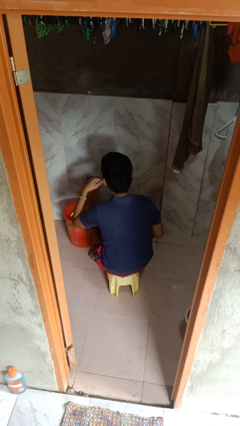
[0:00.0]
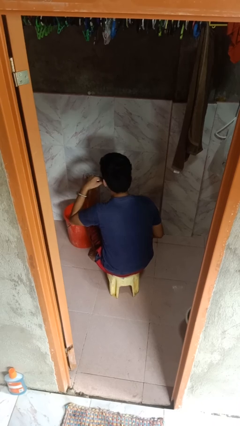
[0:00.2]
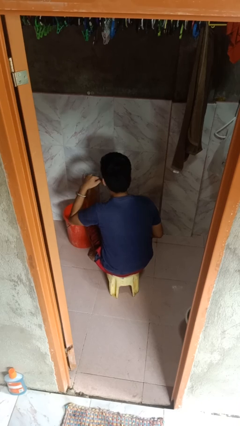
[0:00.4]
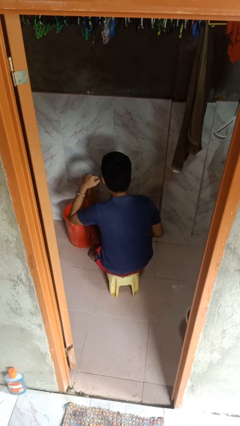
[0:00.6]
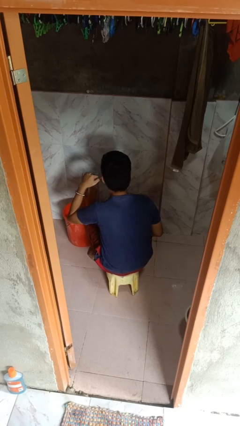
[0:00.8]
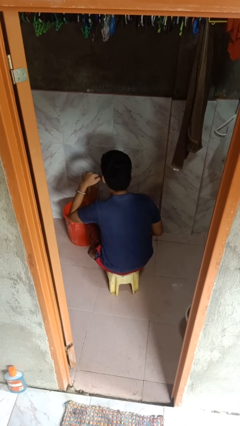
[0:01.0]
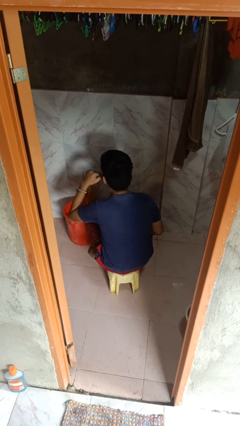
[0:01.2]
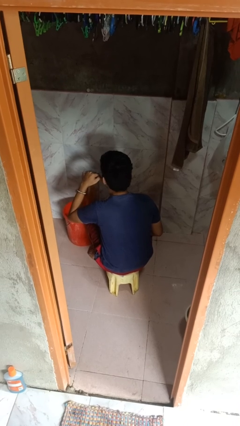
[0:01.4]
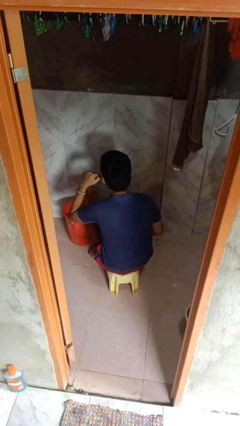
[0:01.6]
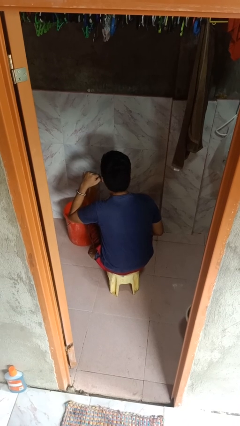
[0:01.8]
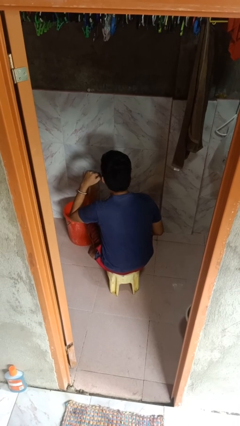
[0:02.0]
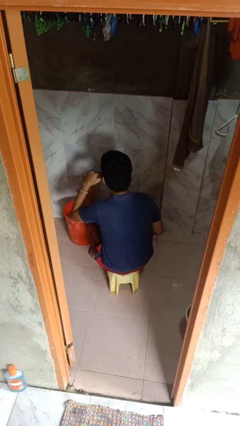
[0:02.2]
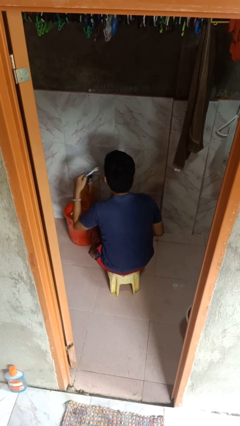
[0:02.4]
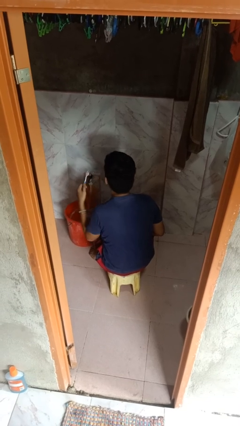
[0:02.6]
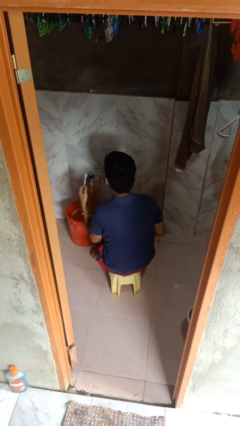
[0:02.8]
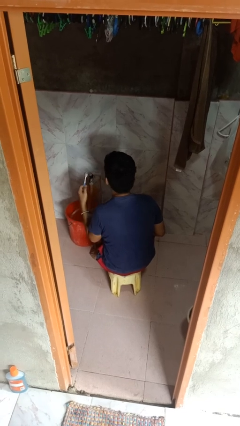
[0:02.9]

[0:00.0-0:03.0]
person brushes teeth

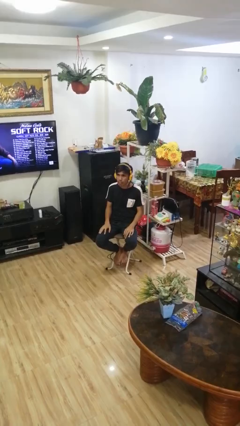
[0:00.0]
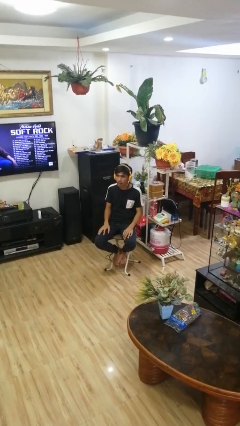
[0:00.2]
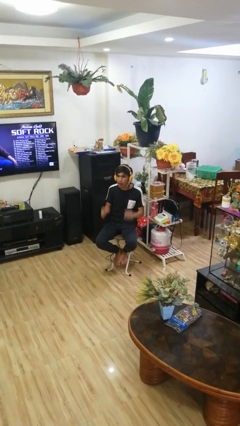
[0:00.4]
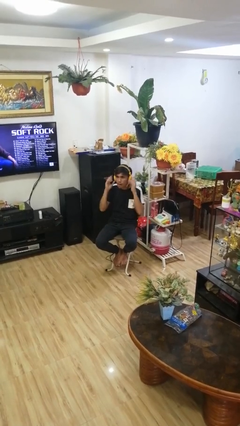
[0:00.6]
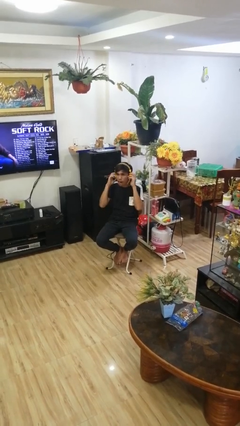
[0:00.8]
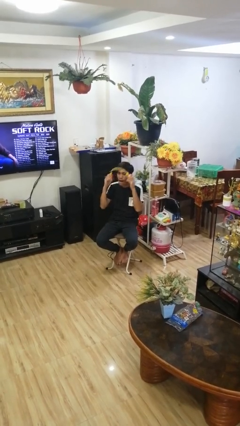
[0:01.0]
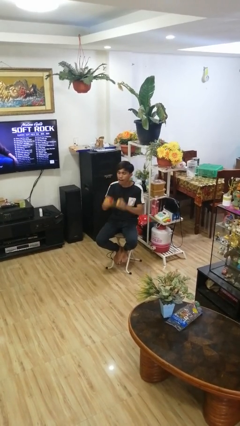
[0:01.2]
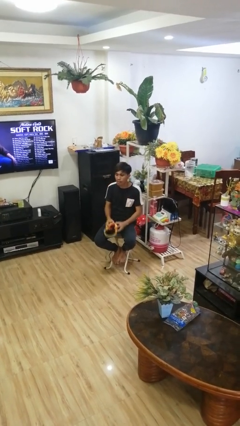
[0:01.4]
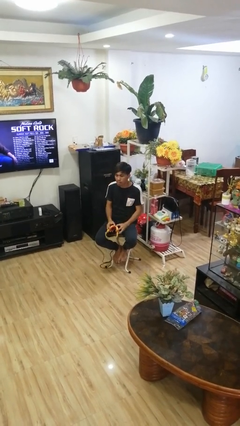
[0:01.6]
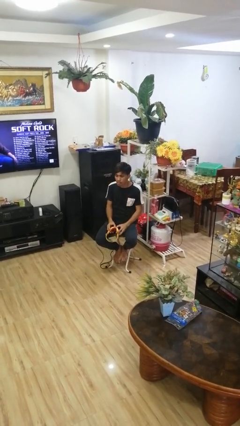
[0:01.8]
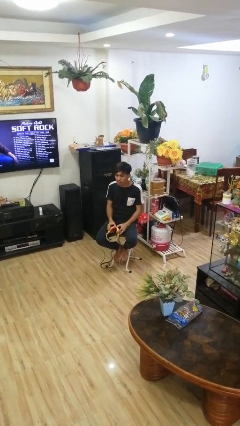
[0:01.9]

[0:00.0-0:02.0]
person takes off headphones

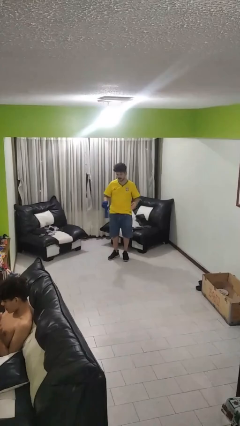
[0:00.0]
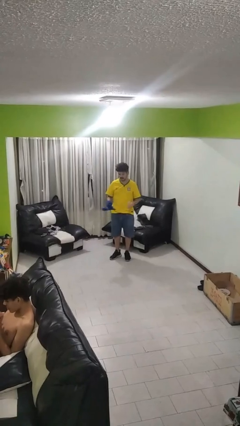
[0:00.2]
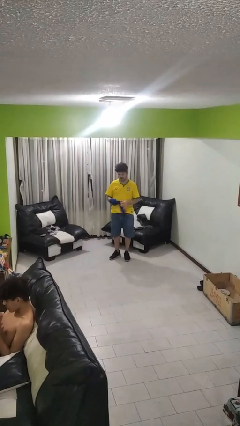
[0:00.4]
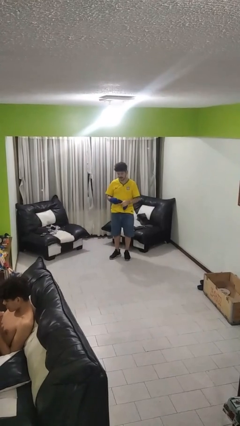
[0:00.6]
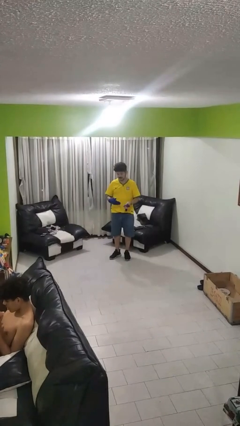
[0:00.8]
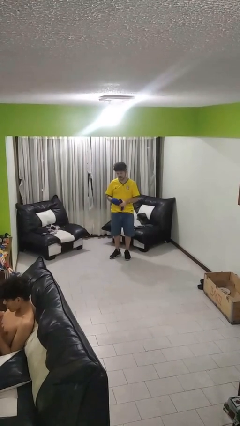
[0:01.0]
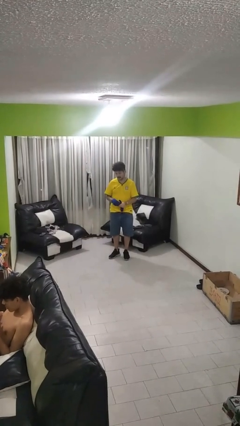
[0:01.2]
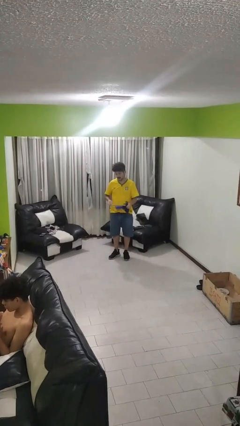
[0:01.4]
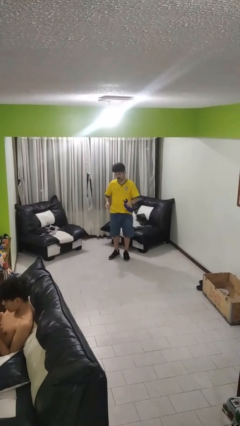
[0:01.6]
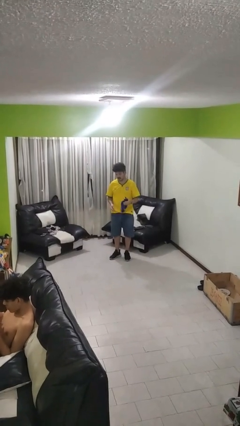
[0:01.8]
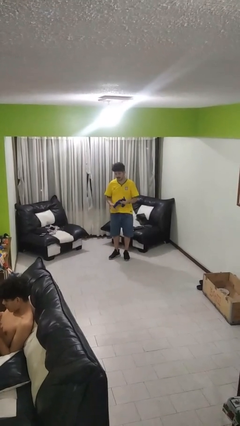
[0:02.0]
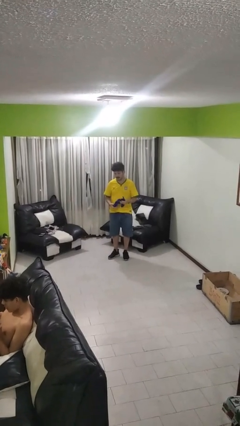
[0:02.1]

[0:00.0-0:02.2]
person takes off gloves

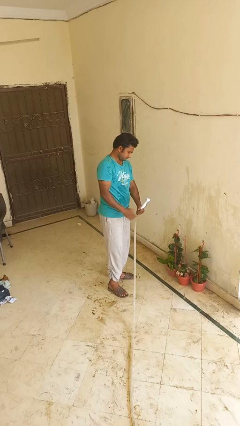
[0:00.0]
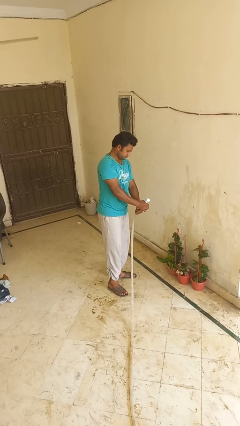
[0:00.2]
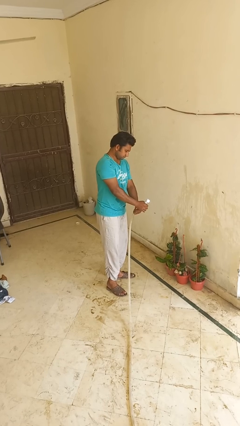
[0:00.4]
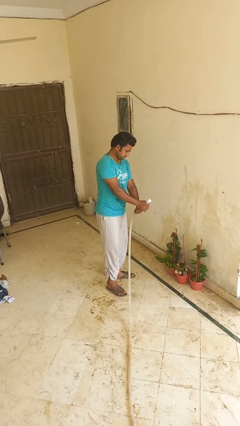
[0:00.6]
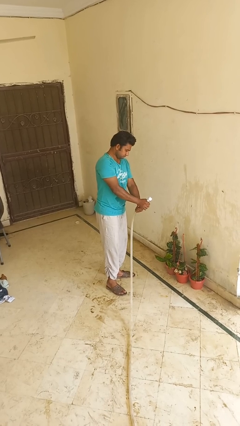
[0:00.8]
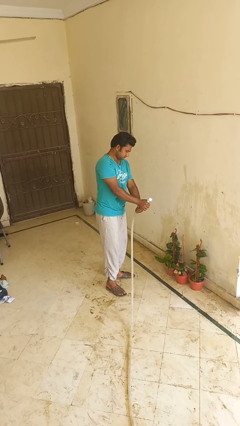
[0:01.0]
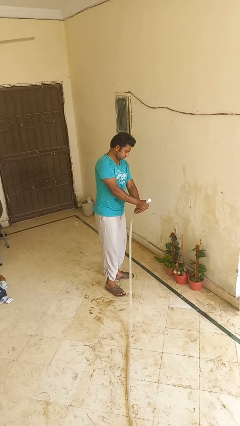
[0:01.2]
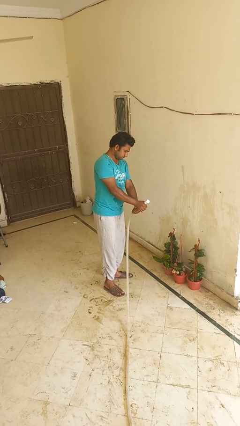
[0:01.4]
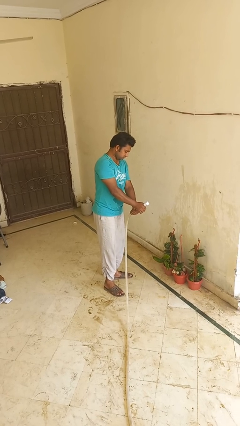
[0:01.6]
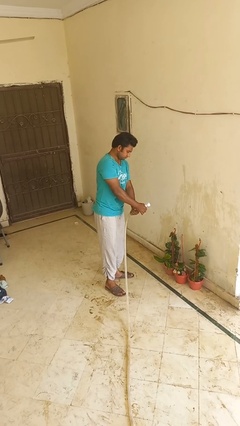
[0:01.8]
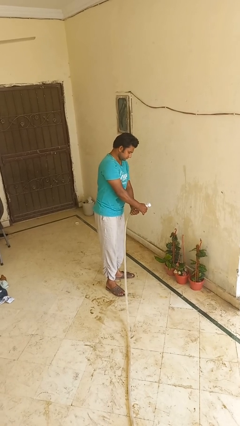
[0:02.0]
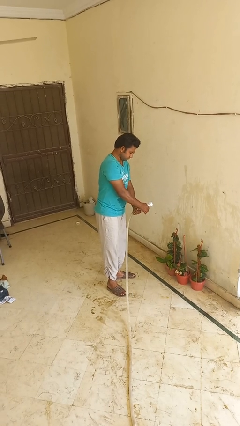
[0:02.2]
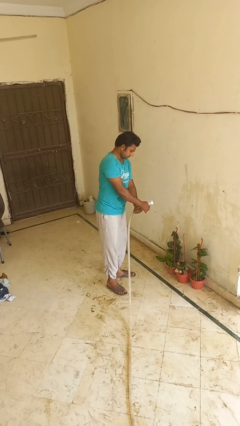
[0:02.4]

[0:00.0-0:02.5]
person waters houseplant

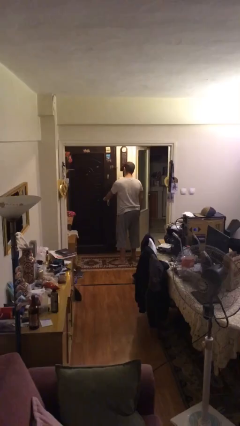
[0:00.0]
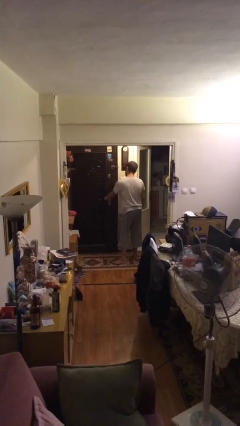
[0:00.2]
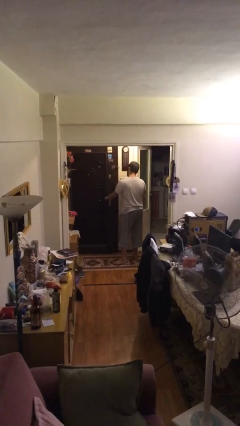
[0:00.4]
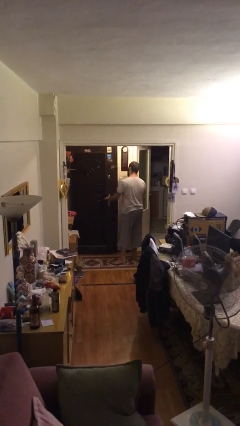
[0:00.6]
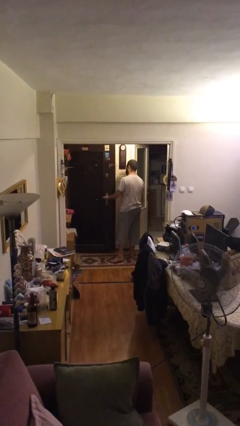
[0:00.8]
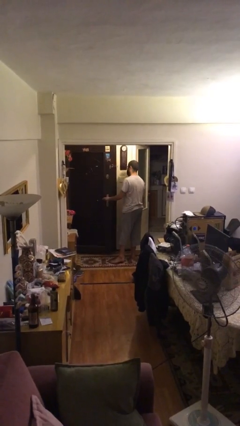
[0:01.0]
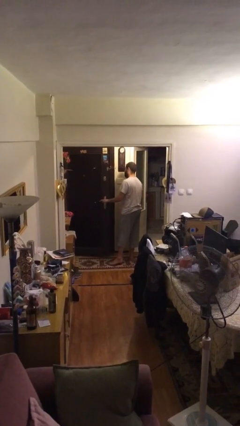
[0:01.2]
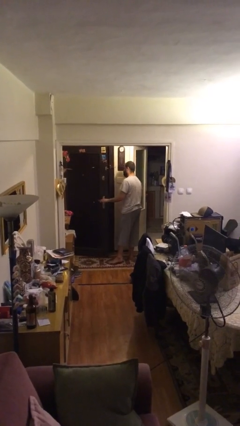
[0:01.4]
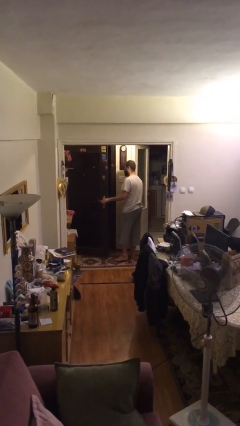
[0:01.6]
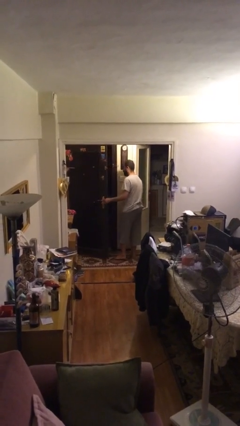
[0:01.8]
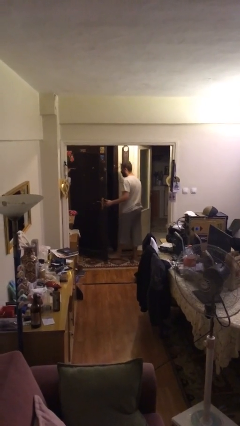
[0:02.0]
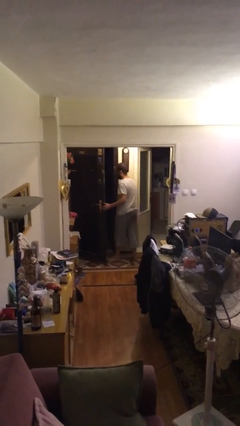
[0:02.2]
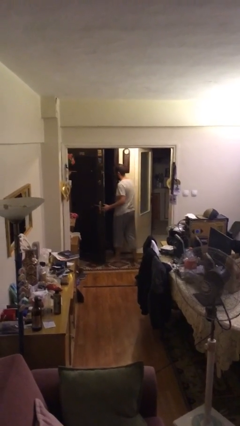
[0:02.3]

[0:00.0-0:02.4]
person opens facility door

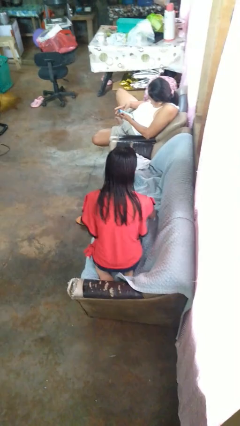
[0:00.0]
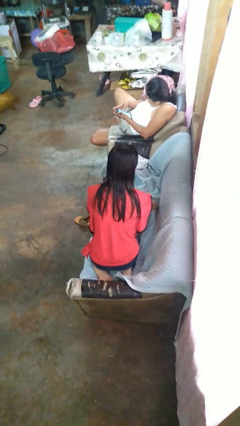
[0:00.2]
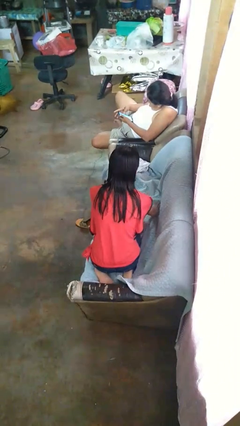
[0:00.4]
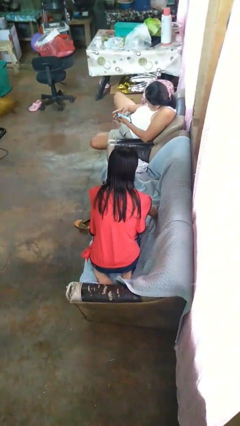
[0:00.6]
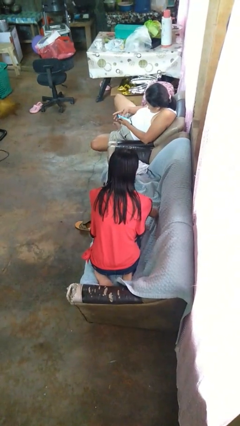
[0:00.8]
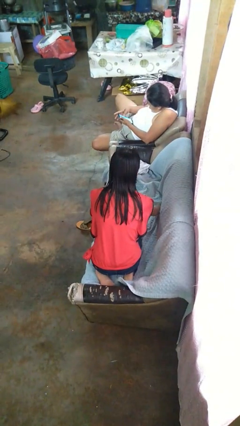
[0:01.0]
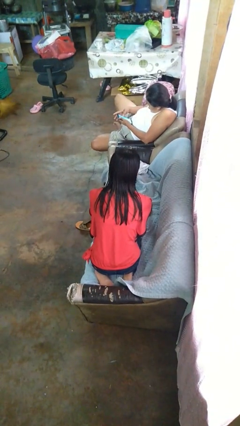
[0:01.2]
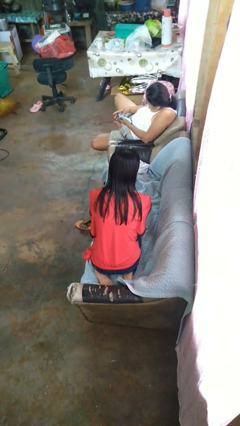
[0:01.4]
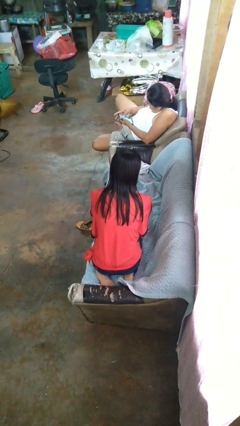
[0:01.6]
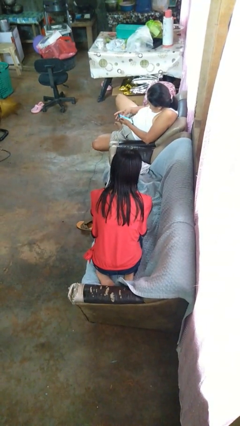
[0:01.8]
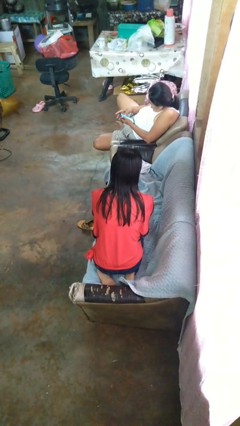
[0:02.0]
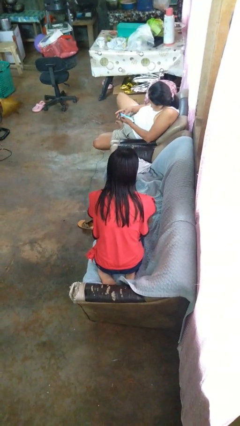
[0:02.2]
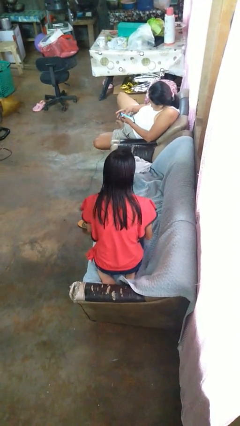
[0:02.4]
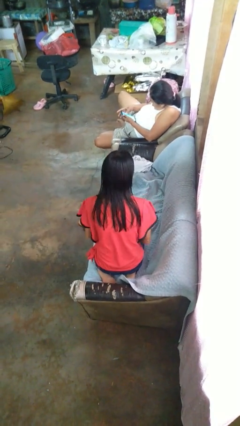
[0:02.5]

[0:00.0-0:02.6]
person searches in couch

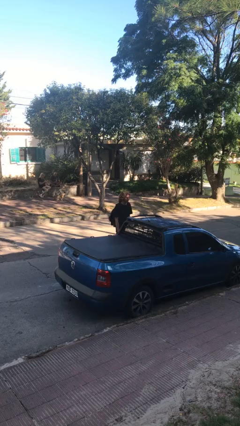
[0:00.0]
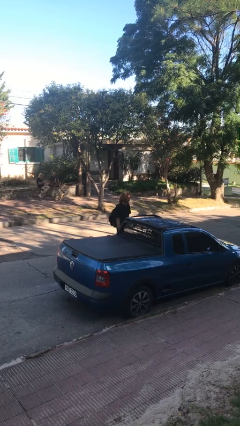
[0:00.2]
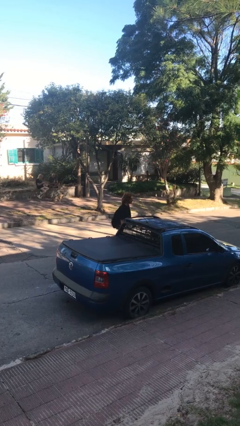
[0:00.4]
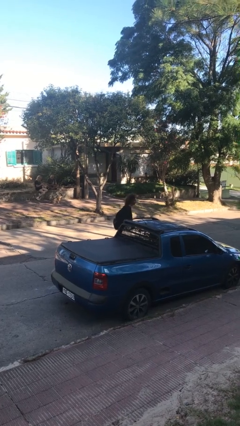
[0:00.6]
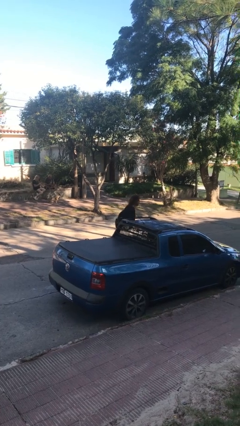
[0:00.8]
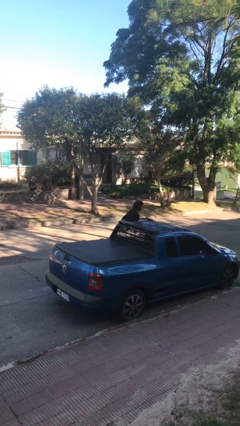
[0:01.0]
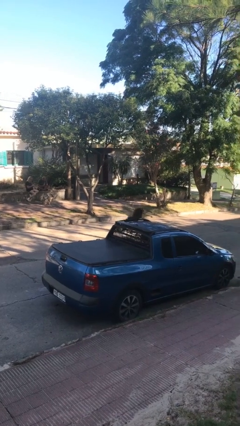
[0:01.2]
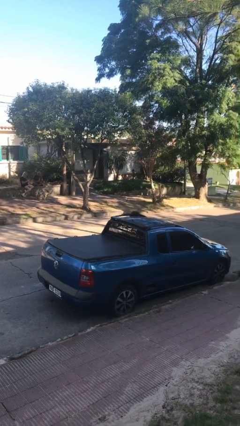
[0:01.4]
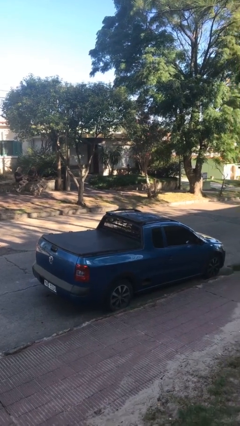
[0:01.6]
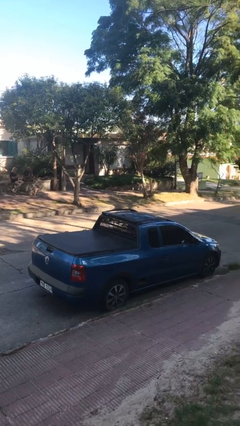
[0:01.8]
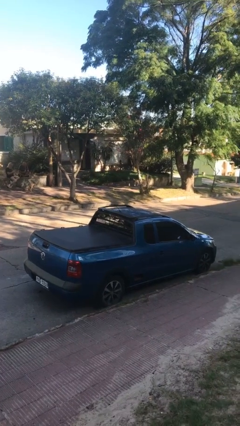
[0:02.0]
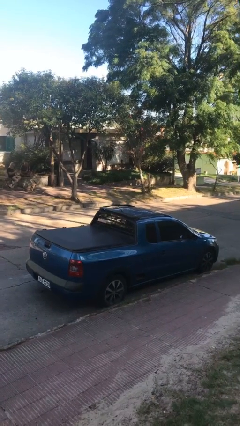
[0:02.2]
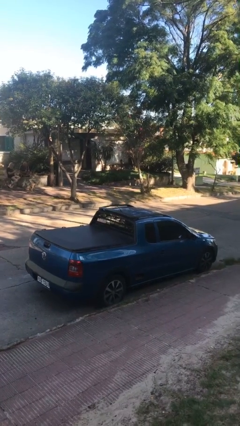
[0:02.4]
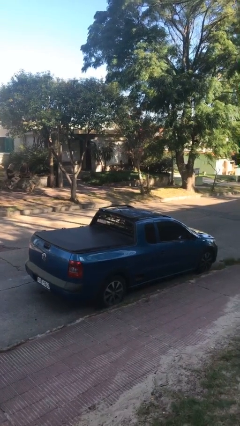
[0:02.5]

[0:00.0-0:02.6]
person enters car
